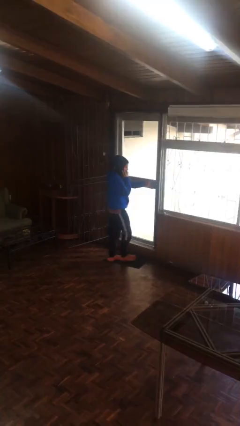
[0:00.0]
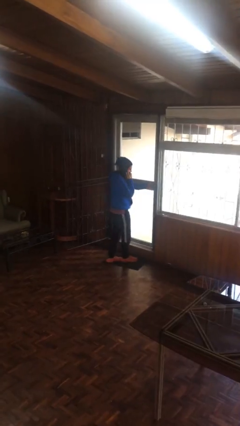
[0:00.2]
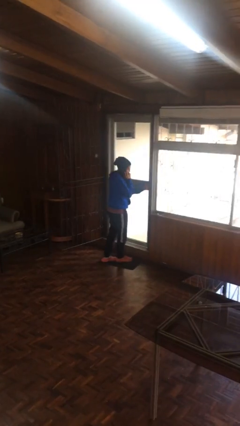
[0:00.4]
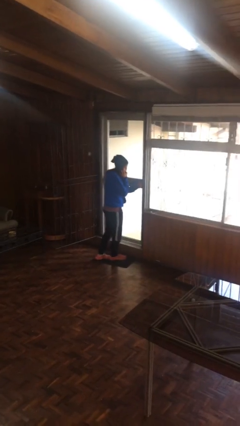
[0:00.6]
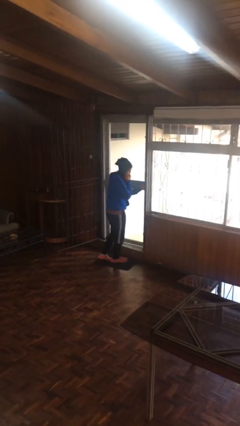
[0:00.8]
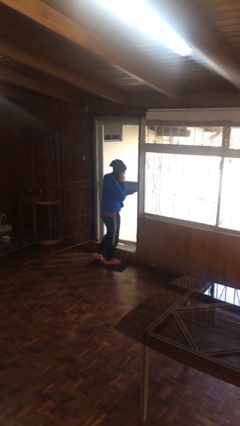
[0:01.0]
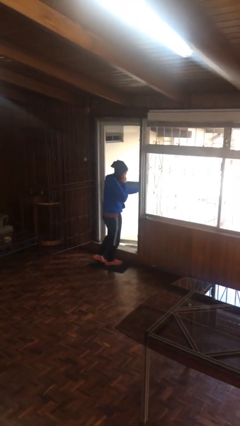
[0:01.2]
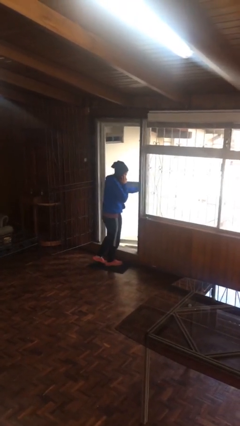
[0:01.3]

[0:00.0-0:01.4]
person opens facility door

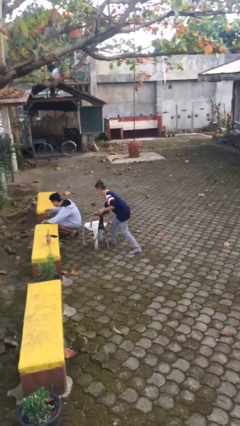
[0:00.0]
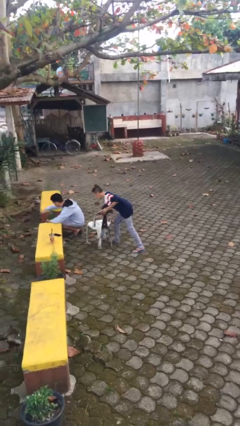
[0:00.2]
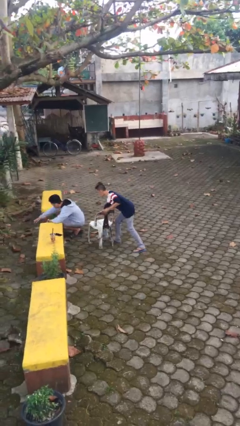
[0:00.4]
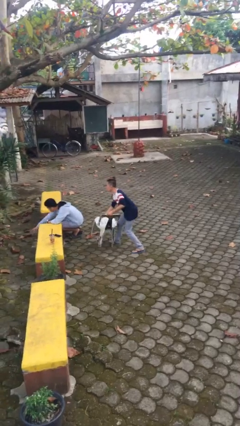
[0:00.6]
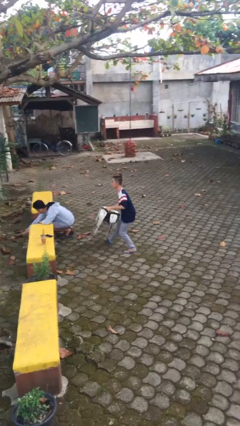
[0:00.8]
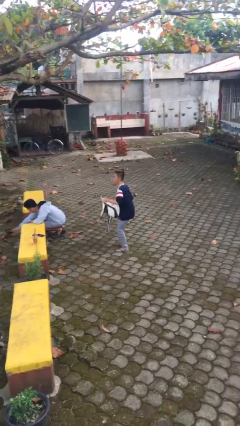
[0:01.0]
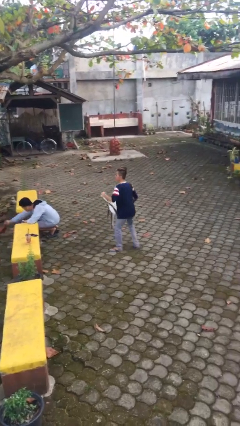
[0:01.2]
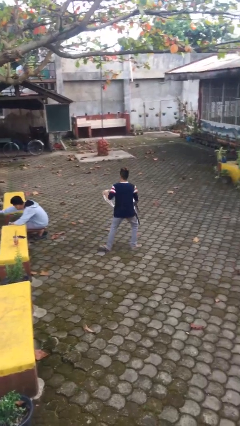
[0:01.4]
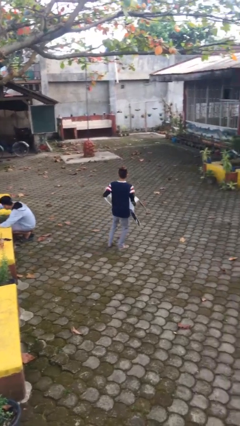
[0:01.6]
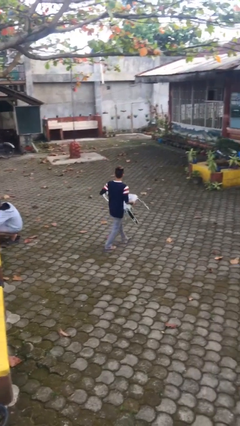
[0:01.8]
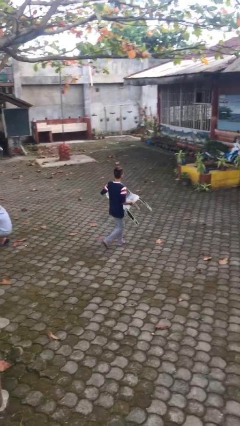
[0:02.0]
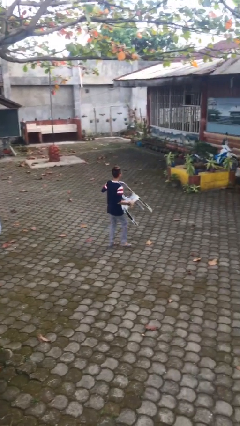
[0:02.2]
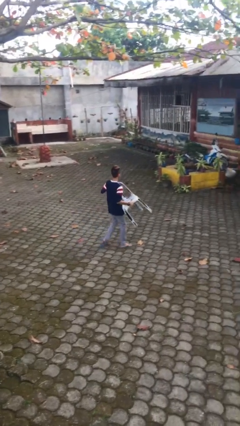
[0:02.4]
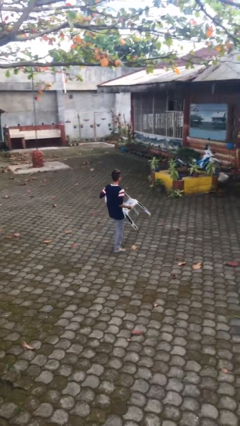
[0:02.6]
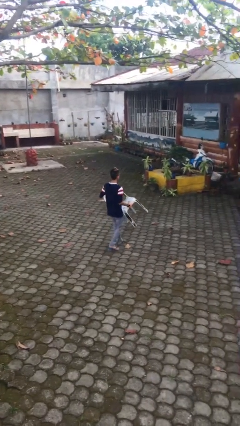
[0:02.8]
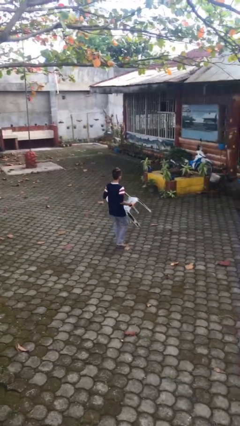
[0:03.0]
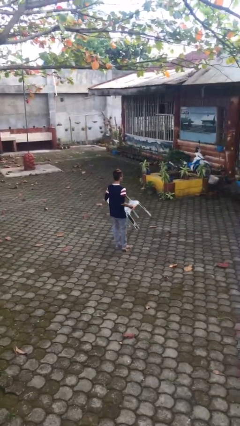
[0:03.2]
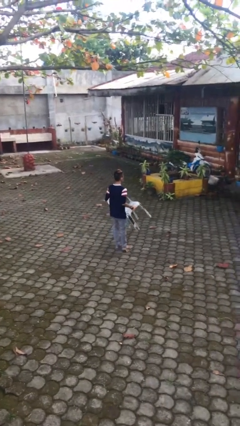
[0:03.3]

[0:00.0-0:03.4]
person steals object from person

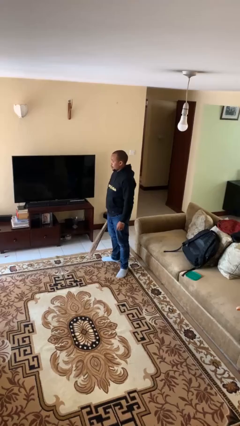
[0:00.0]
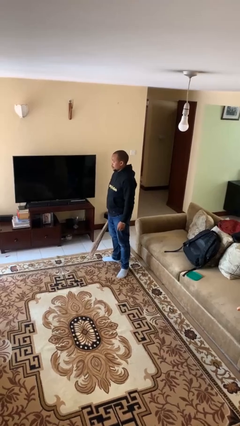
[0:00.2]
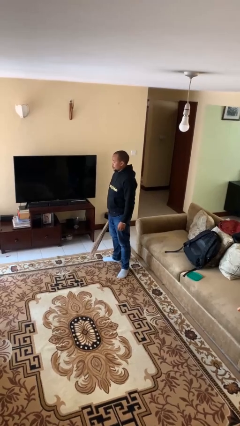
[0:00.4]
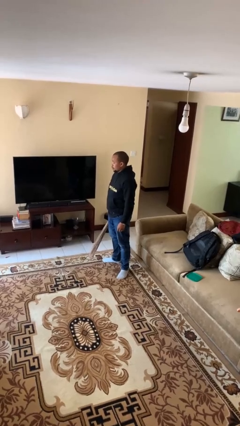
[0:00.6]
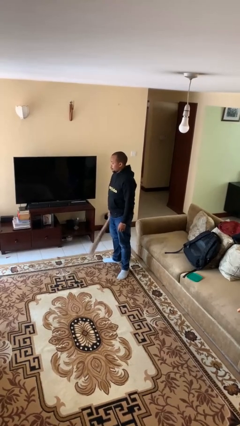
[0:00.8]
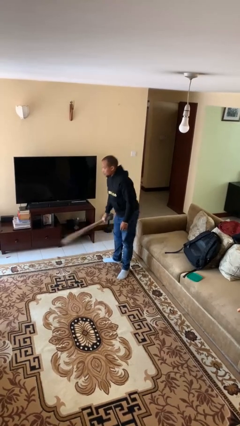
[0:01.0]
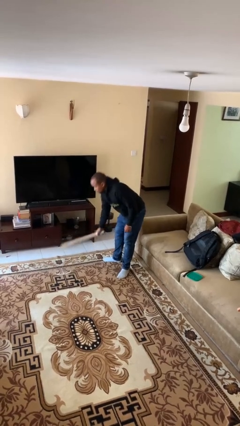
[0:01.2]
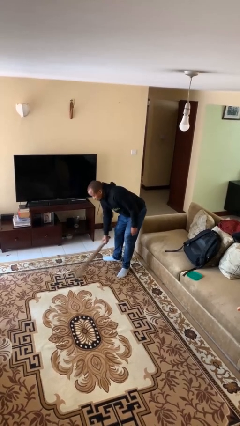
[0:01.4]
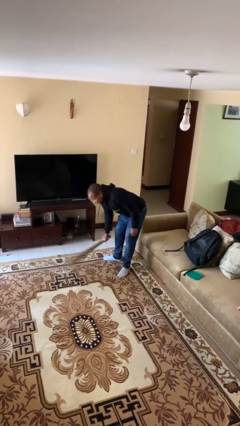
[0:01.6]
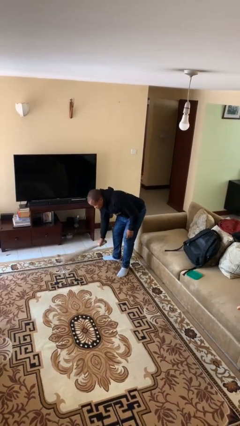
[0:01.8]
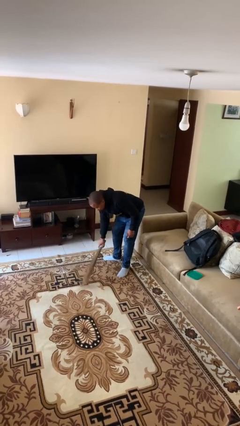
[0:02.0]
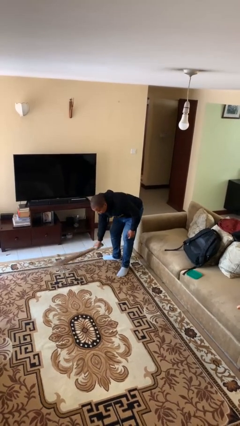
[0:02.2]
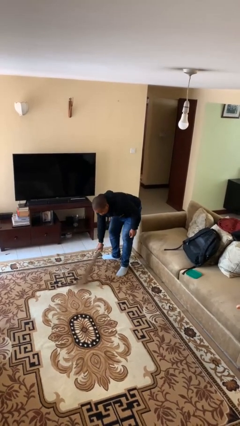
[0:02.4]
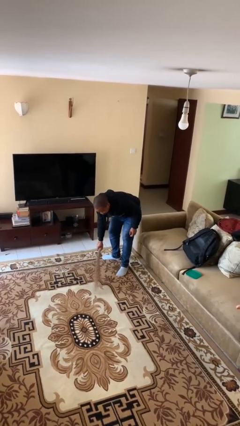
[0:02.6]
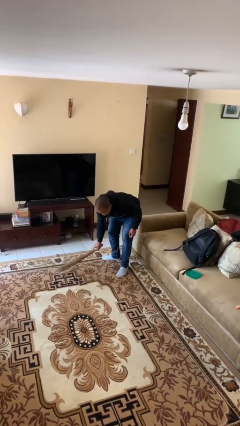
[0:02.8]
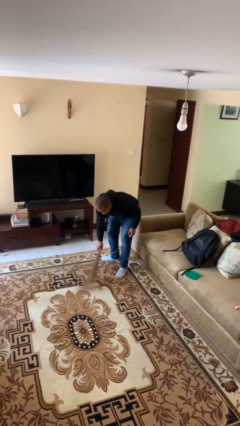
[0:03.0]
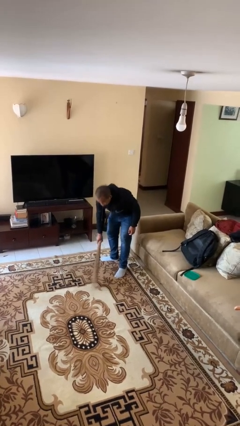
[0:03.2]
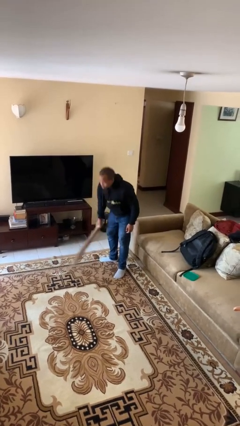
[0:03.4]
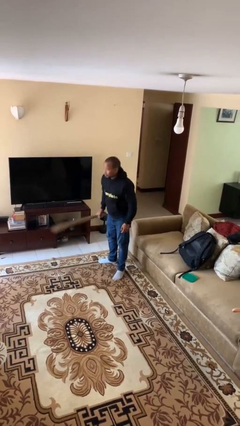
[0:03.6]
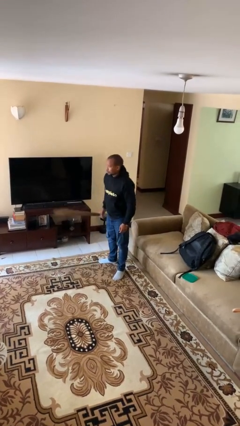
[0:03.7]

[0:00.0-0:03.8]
person sweeps floor

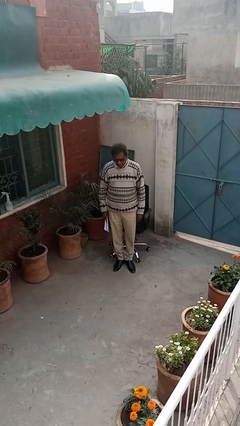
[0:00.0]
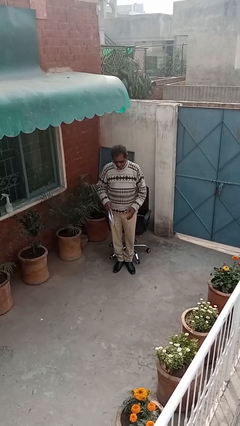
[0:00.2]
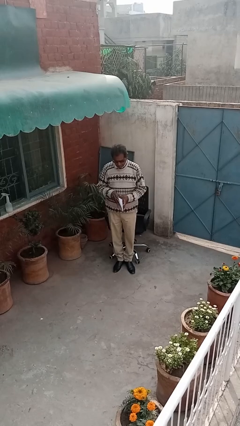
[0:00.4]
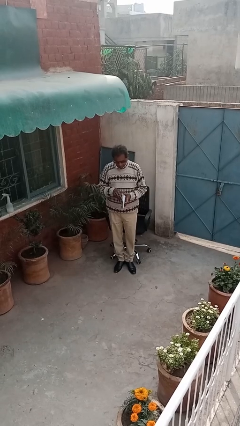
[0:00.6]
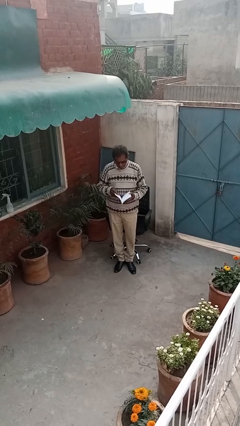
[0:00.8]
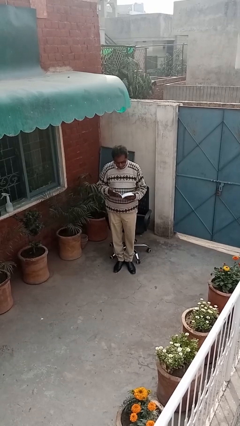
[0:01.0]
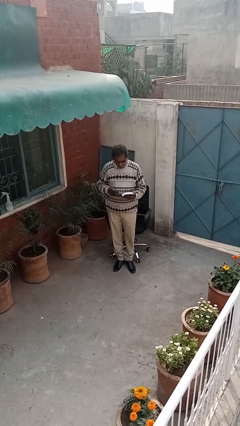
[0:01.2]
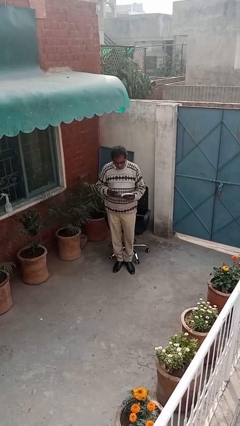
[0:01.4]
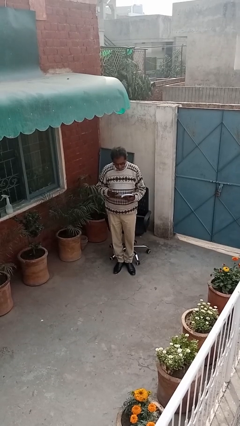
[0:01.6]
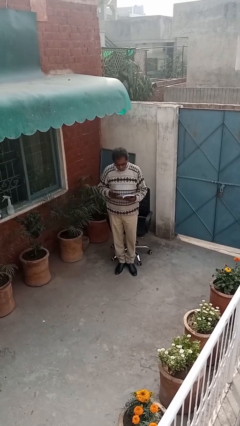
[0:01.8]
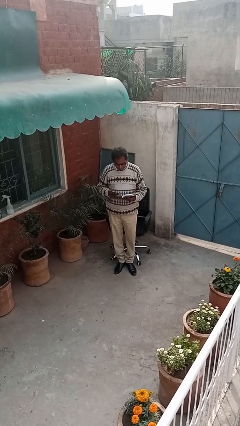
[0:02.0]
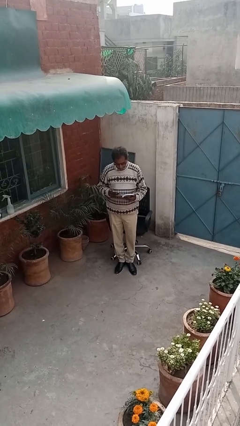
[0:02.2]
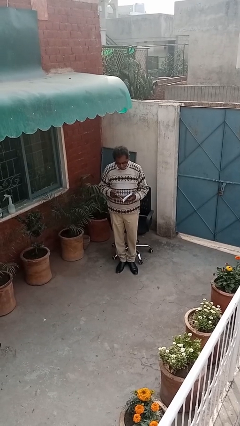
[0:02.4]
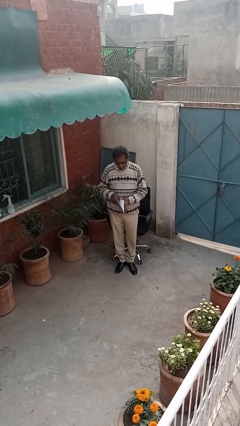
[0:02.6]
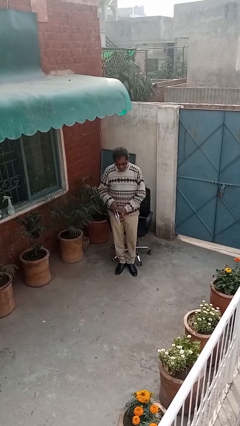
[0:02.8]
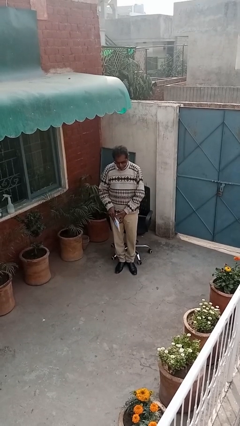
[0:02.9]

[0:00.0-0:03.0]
person reads document

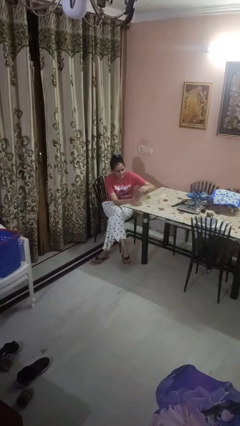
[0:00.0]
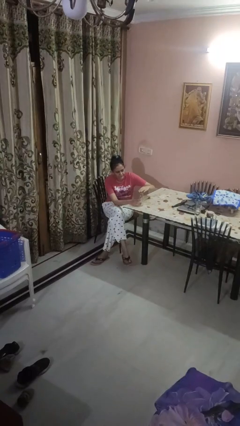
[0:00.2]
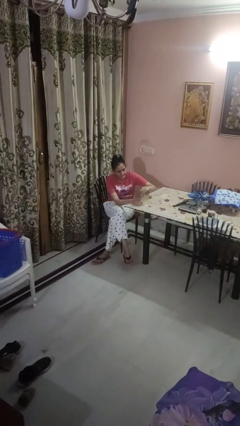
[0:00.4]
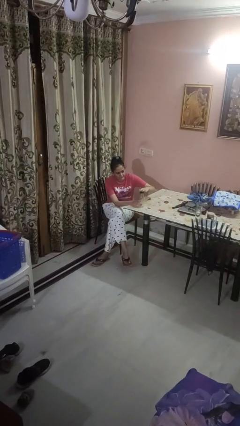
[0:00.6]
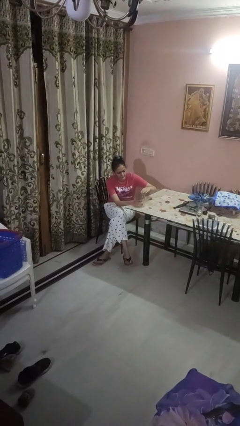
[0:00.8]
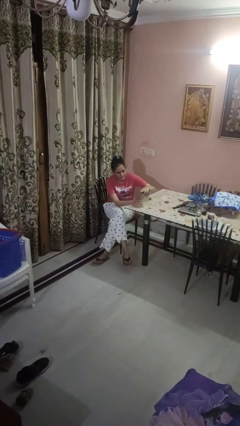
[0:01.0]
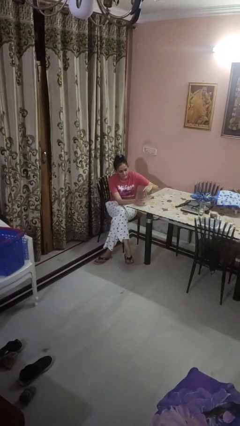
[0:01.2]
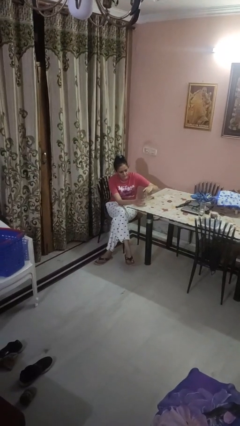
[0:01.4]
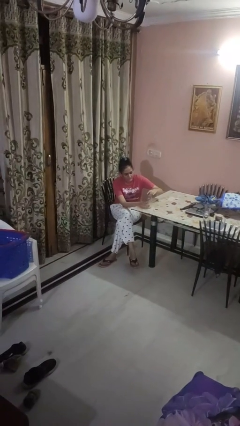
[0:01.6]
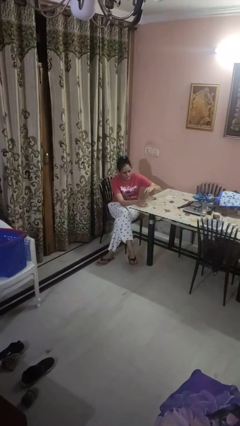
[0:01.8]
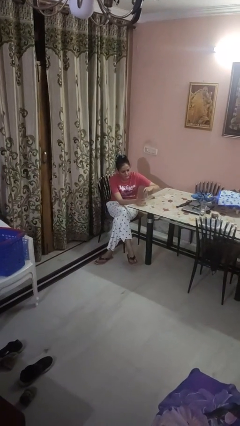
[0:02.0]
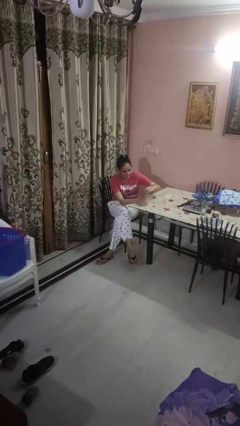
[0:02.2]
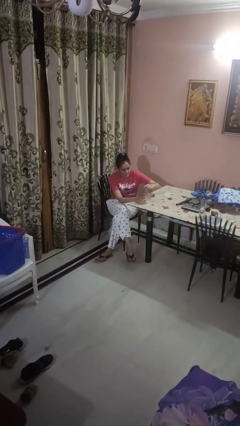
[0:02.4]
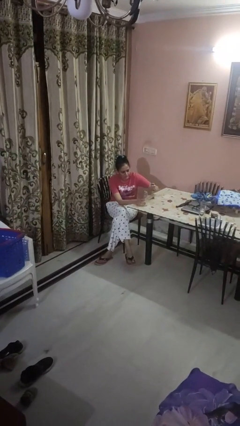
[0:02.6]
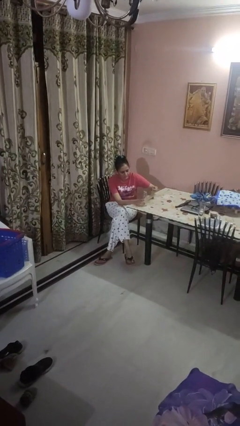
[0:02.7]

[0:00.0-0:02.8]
person unscrews lid from bottle

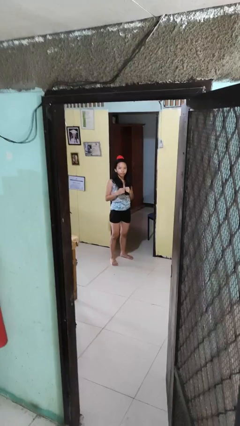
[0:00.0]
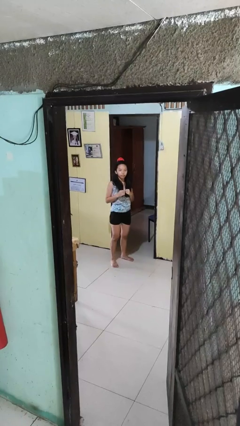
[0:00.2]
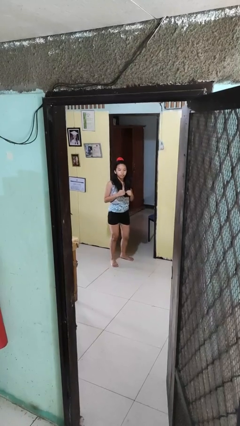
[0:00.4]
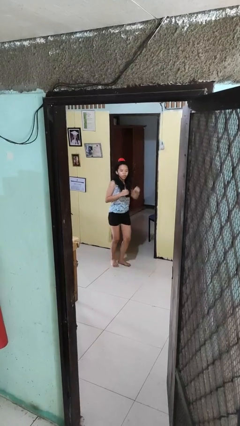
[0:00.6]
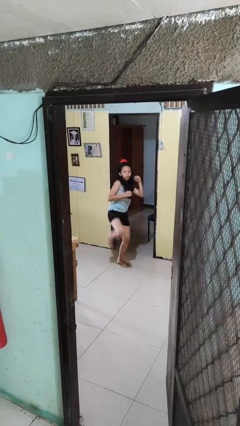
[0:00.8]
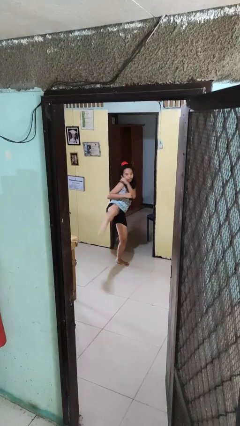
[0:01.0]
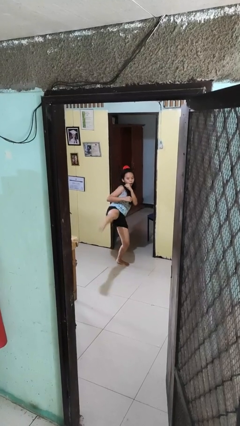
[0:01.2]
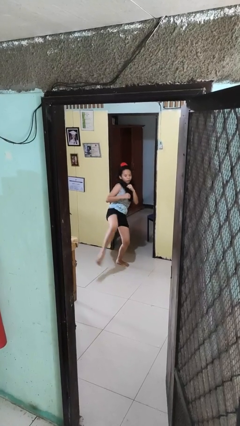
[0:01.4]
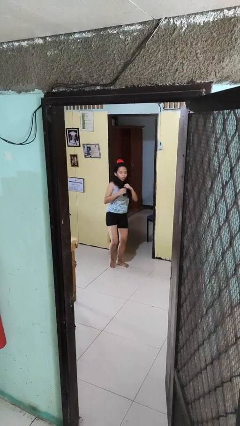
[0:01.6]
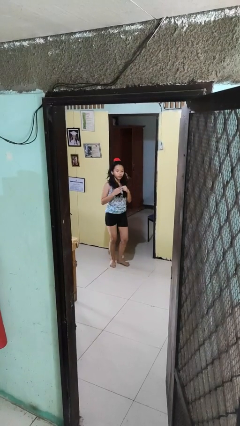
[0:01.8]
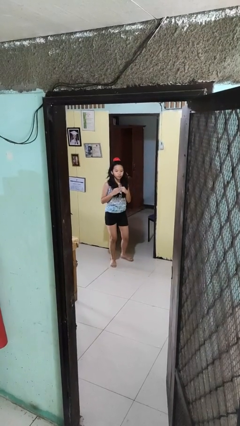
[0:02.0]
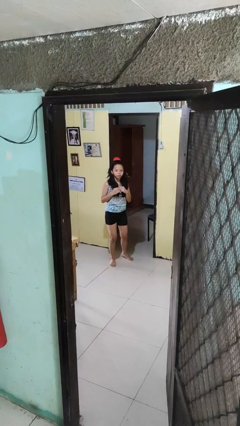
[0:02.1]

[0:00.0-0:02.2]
person karate kicks

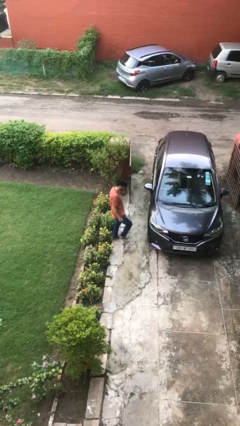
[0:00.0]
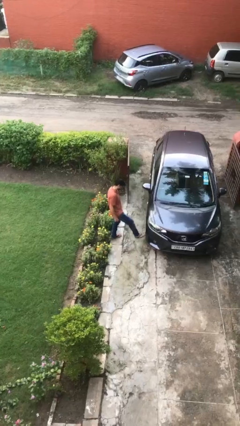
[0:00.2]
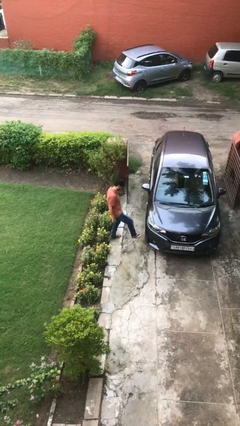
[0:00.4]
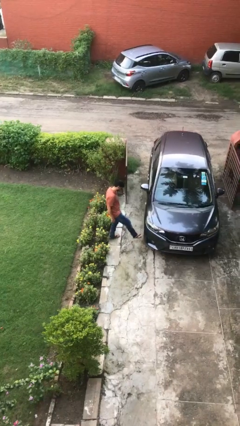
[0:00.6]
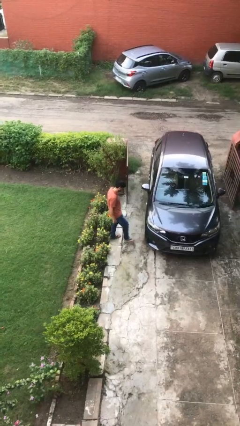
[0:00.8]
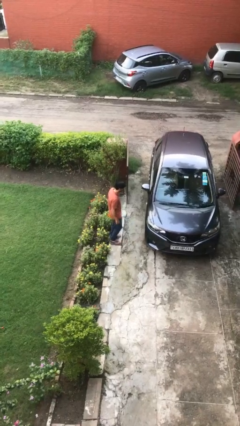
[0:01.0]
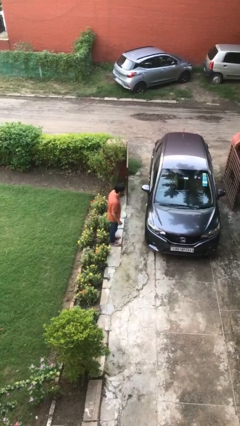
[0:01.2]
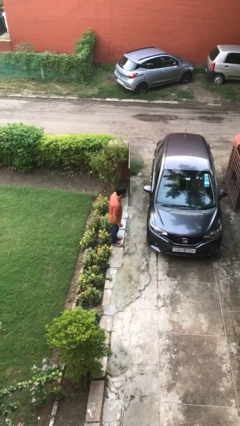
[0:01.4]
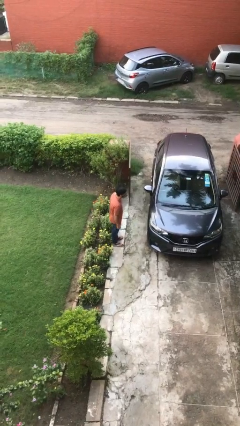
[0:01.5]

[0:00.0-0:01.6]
person kicks car tires
